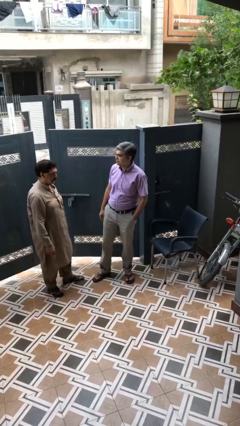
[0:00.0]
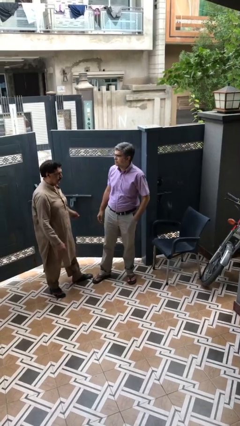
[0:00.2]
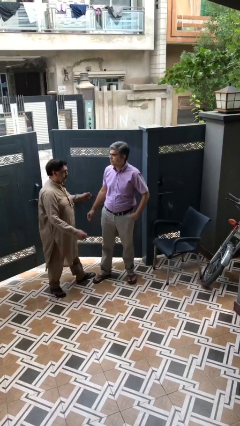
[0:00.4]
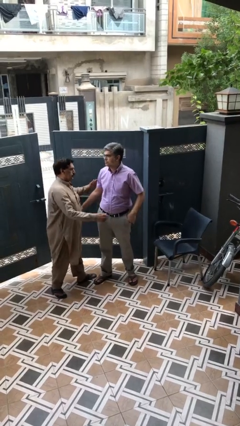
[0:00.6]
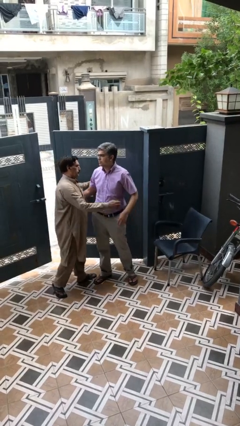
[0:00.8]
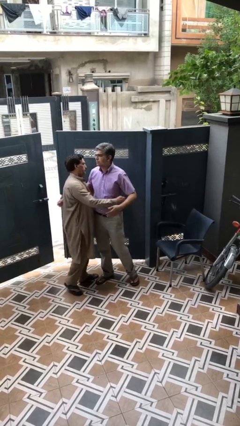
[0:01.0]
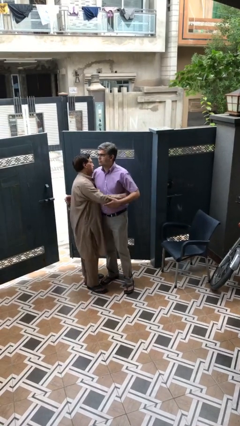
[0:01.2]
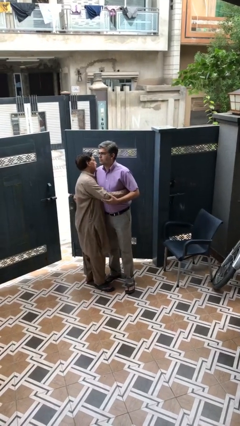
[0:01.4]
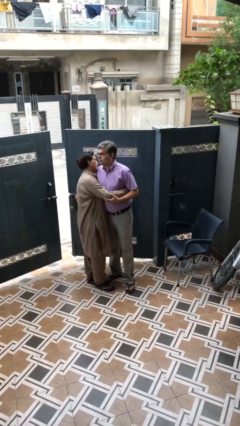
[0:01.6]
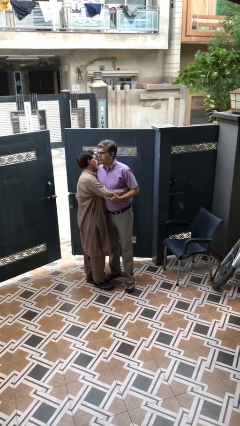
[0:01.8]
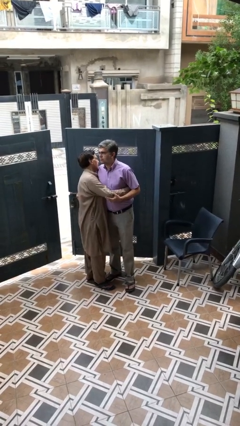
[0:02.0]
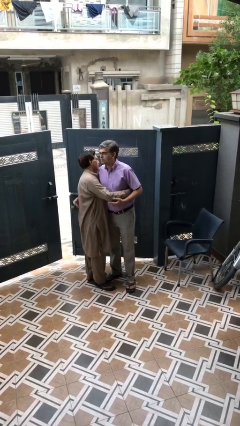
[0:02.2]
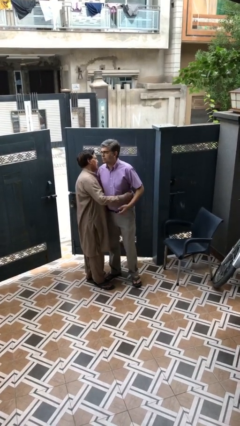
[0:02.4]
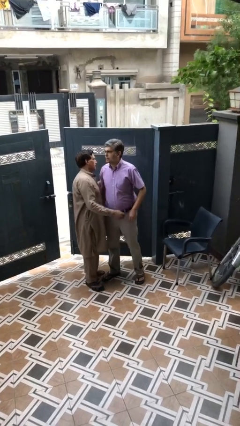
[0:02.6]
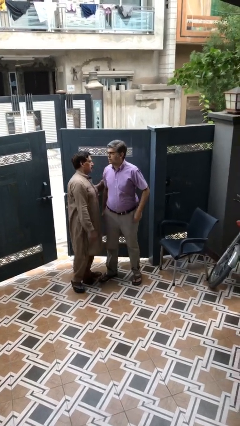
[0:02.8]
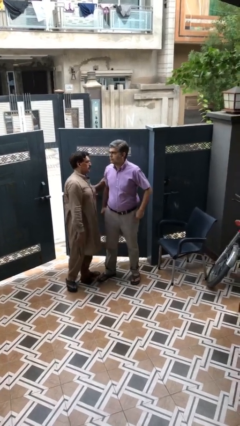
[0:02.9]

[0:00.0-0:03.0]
person embraces person

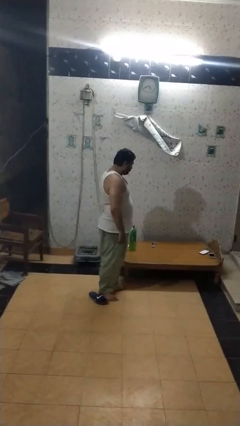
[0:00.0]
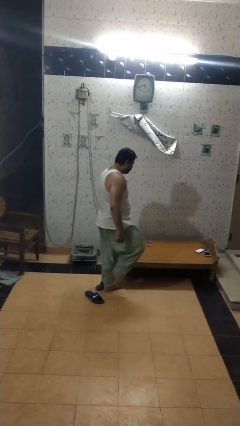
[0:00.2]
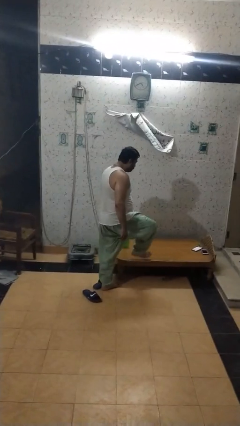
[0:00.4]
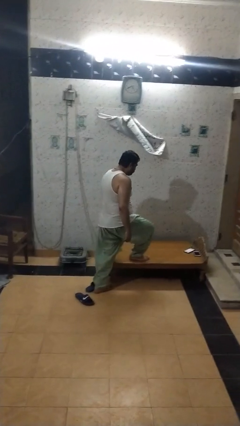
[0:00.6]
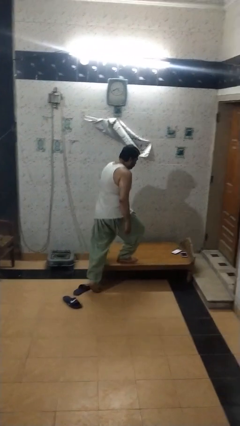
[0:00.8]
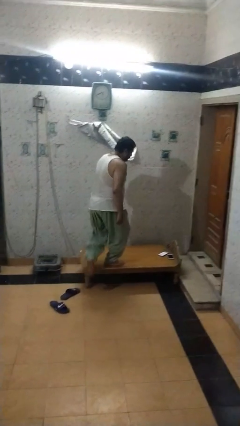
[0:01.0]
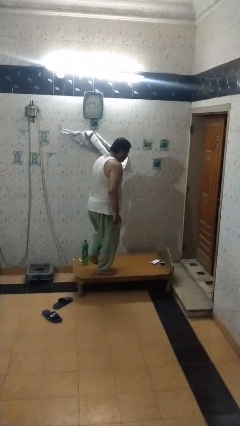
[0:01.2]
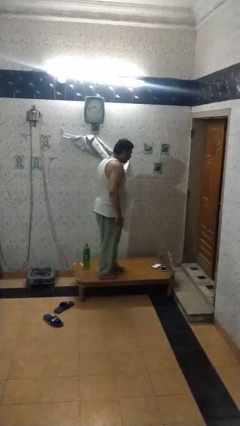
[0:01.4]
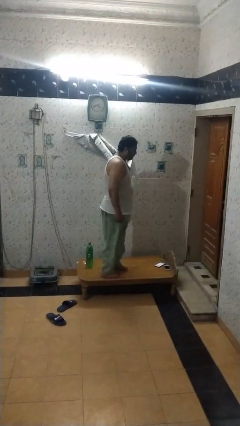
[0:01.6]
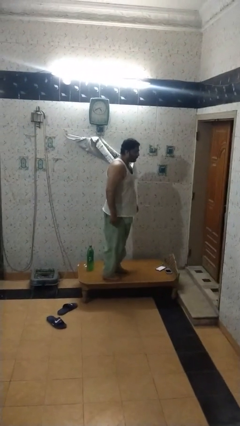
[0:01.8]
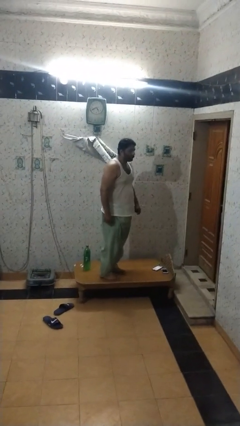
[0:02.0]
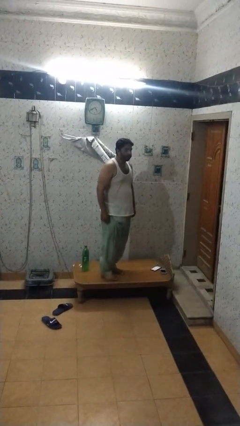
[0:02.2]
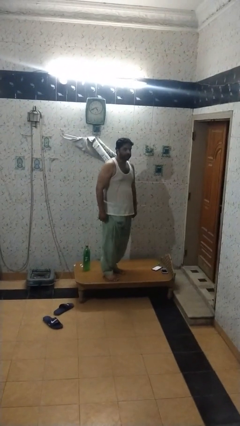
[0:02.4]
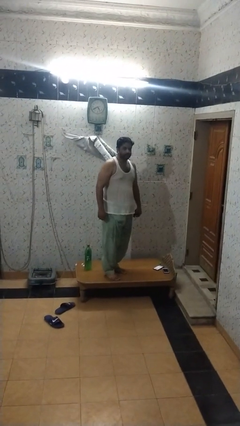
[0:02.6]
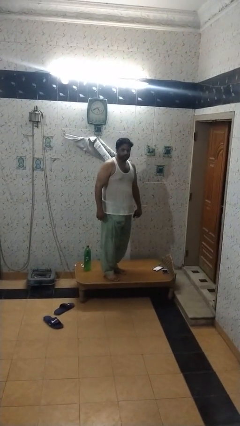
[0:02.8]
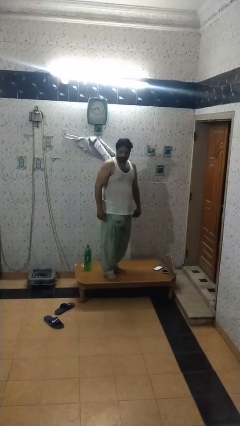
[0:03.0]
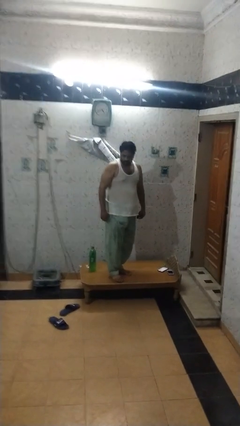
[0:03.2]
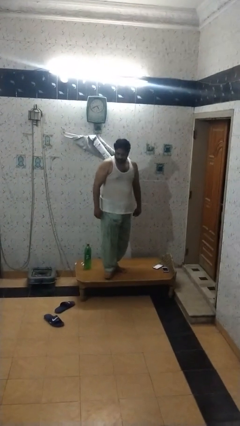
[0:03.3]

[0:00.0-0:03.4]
person climbs on table

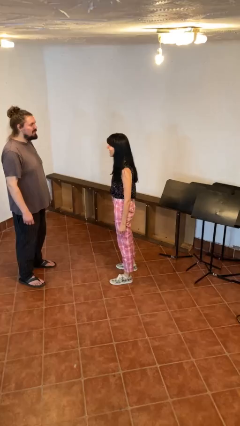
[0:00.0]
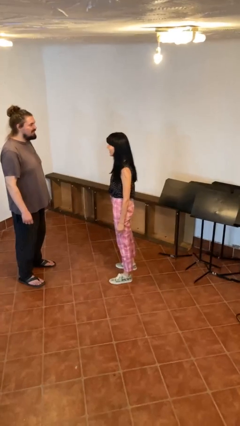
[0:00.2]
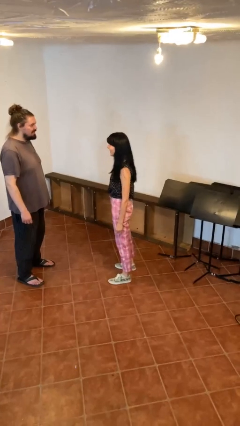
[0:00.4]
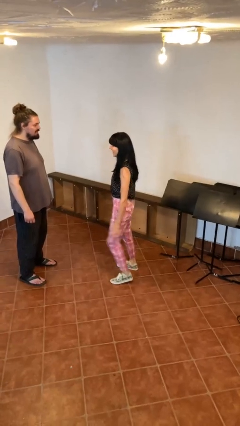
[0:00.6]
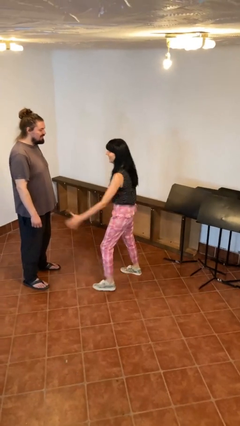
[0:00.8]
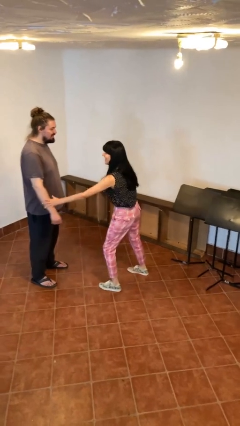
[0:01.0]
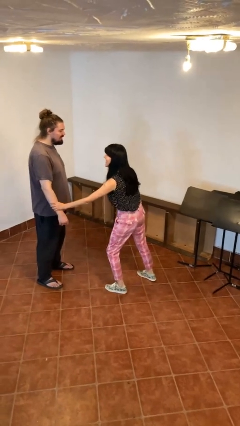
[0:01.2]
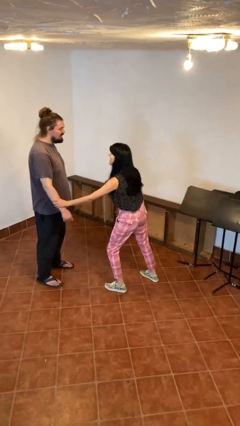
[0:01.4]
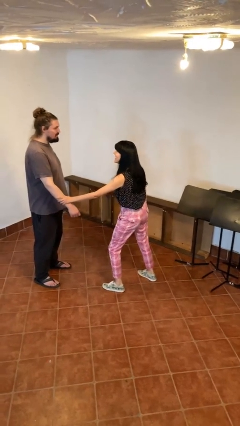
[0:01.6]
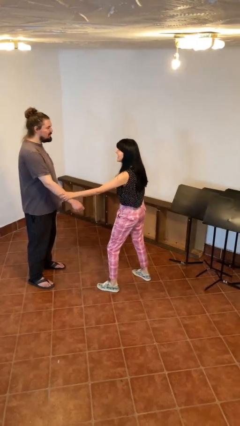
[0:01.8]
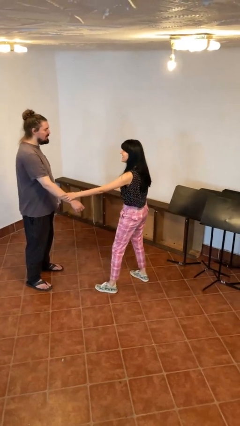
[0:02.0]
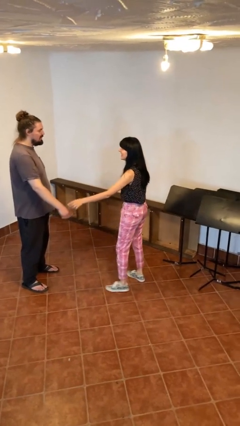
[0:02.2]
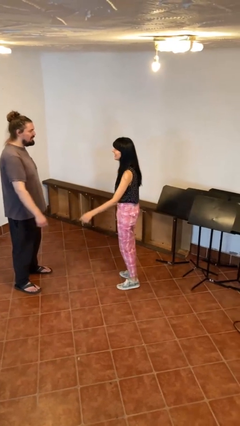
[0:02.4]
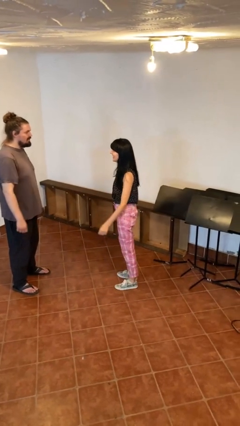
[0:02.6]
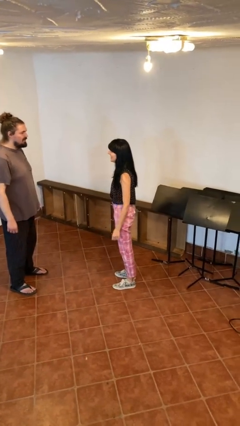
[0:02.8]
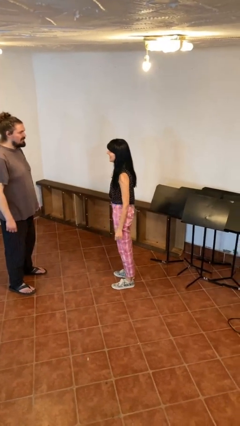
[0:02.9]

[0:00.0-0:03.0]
person grabs person by forearm

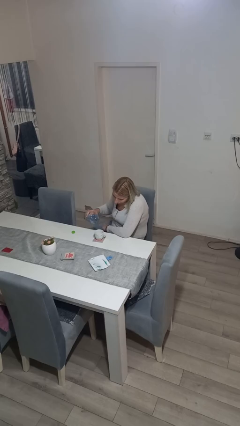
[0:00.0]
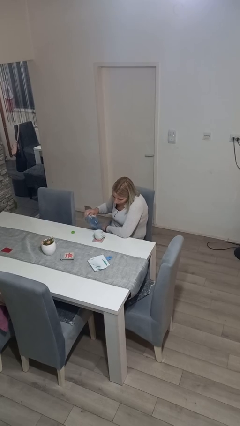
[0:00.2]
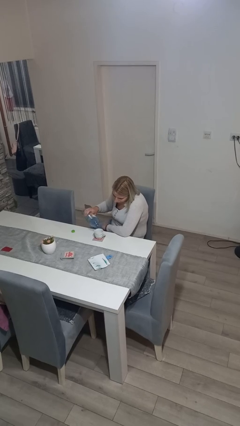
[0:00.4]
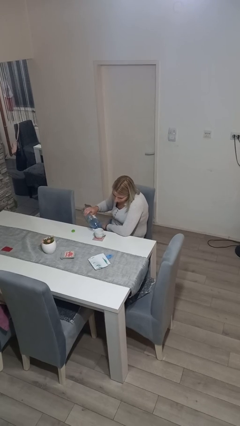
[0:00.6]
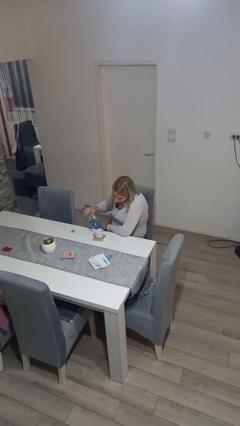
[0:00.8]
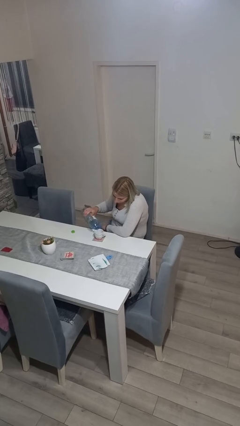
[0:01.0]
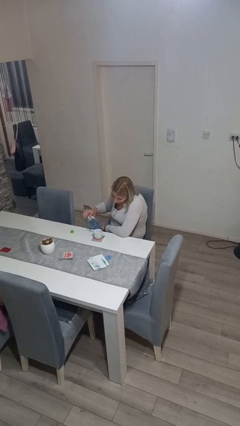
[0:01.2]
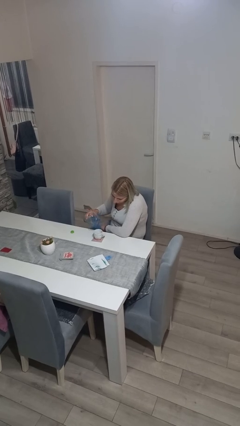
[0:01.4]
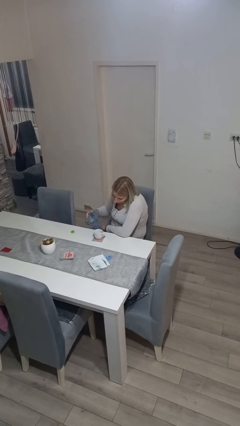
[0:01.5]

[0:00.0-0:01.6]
person pours liquid into cup

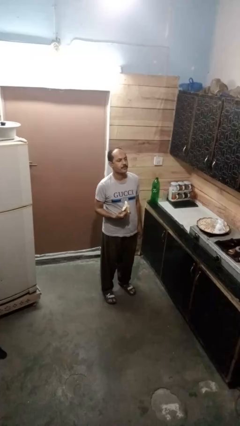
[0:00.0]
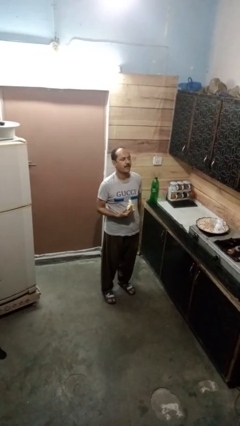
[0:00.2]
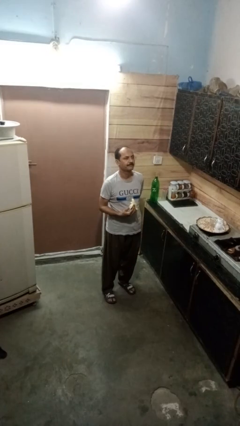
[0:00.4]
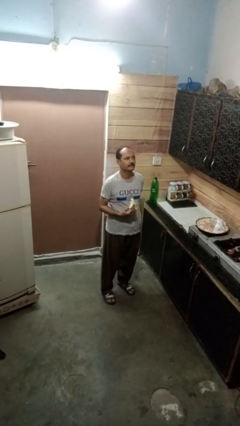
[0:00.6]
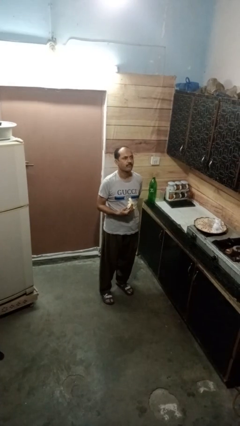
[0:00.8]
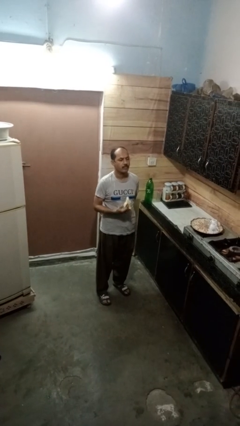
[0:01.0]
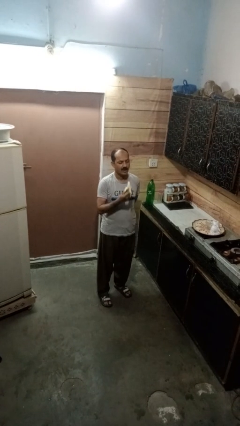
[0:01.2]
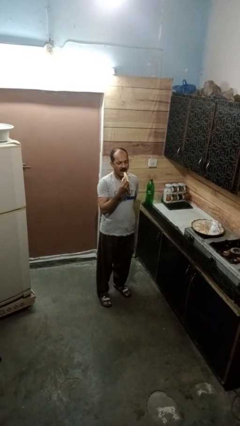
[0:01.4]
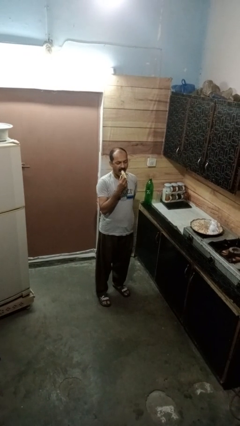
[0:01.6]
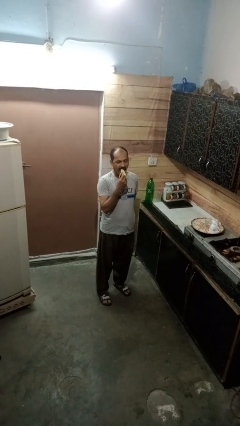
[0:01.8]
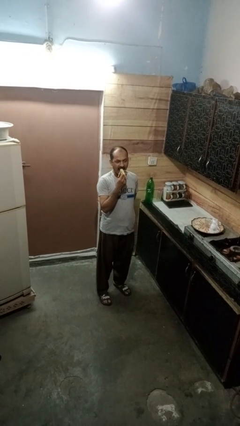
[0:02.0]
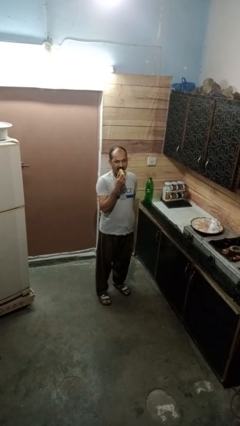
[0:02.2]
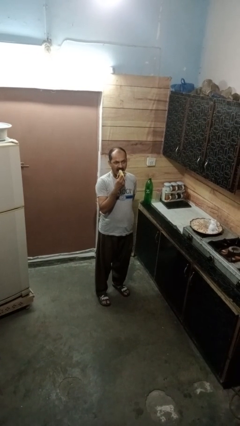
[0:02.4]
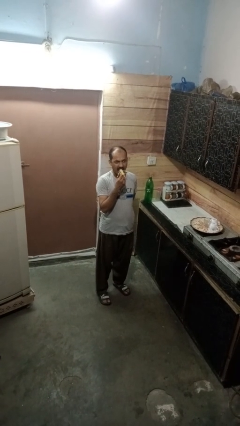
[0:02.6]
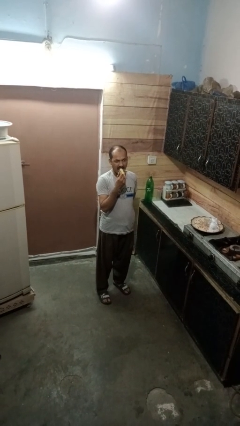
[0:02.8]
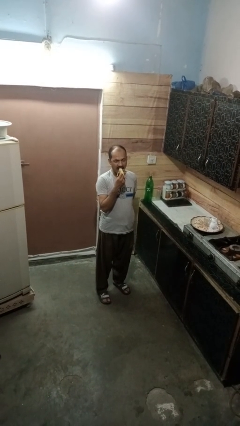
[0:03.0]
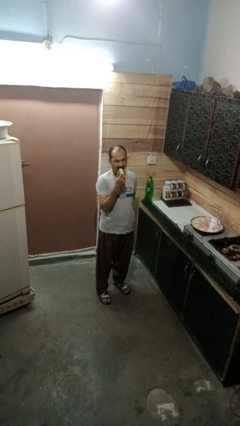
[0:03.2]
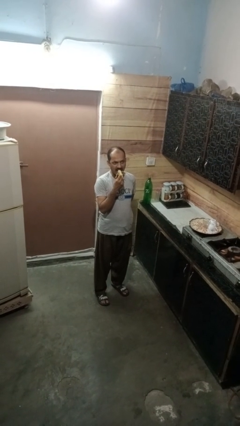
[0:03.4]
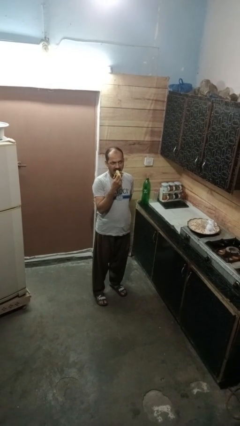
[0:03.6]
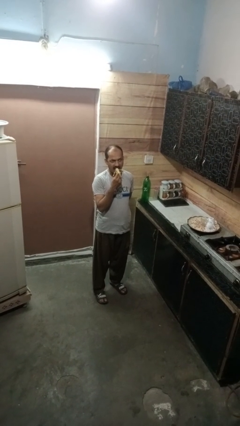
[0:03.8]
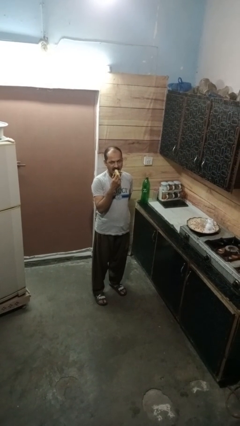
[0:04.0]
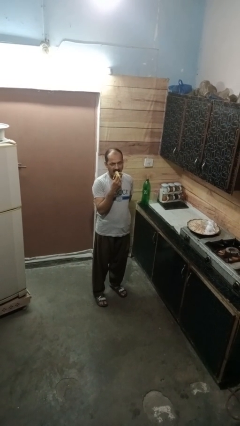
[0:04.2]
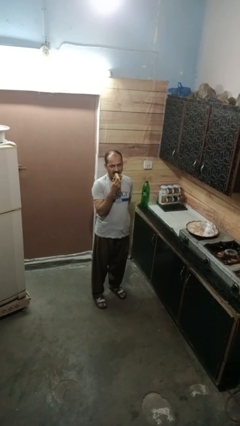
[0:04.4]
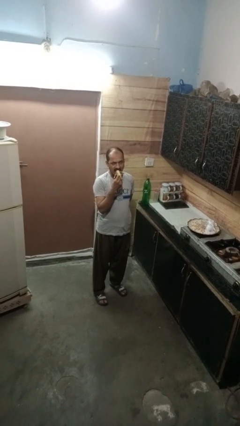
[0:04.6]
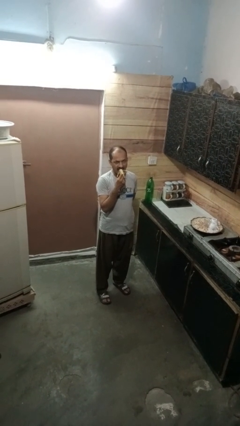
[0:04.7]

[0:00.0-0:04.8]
person eats banana

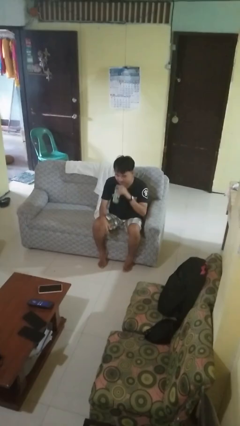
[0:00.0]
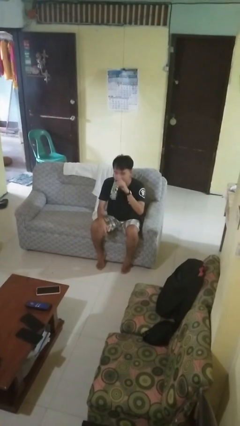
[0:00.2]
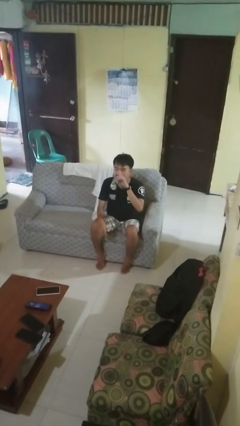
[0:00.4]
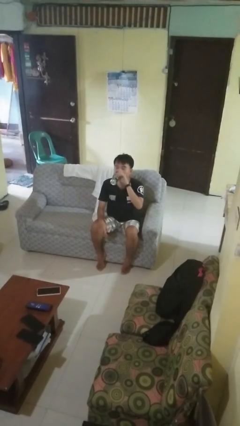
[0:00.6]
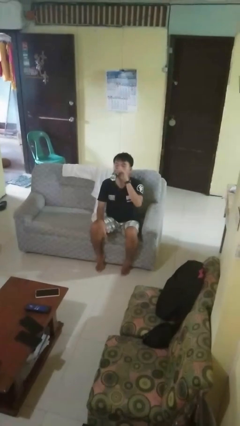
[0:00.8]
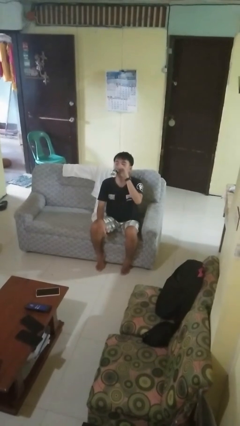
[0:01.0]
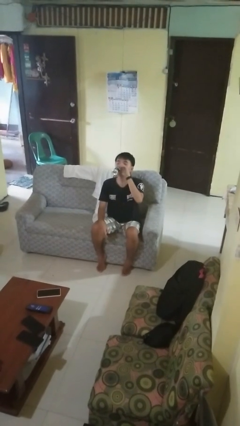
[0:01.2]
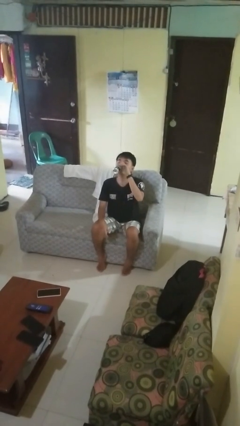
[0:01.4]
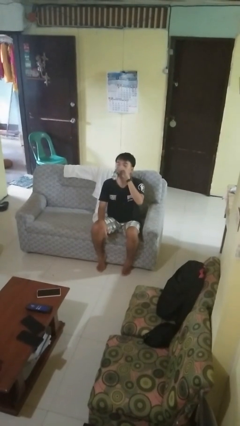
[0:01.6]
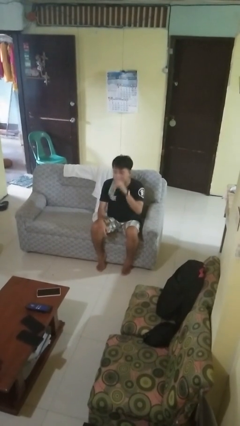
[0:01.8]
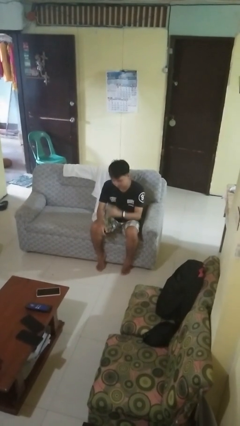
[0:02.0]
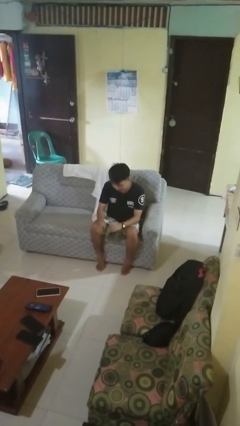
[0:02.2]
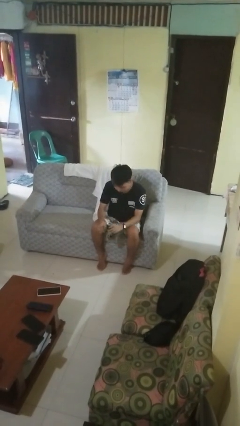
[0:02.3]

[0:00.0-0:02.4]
person drinks from beverage can
